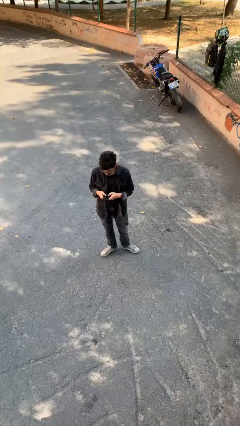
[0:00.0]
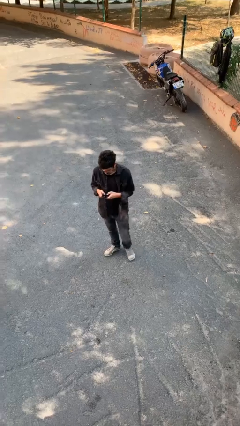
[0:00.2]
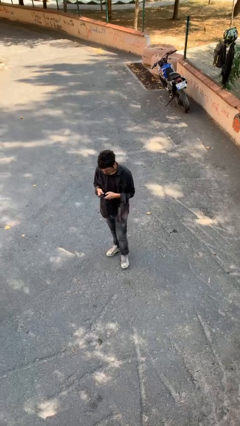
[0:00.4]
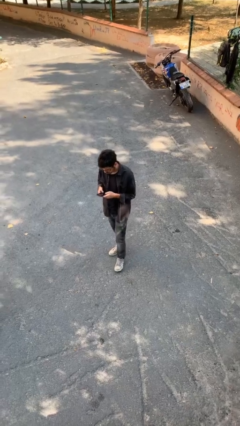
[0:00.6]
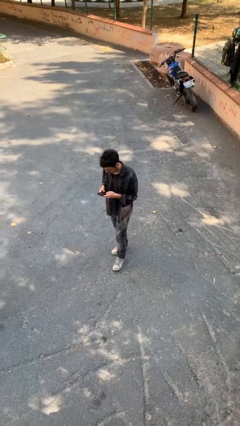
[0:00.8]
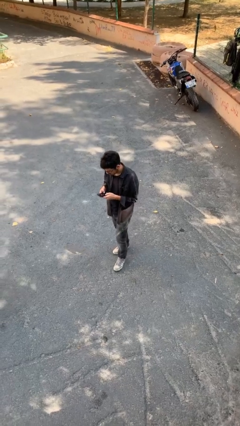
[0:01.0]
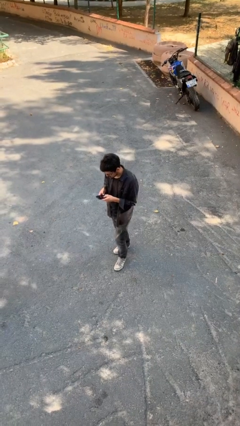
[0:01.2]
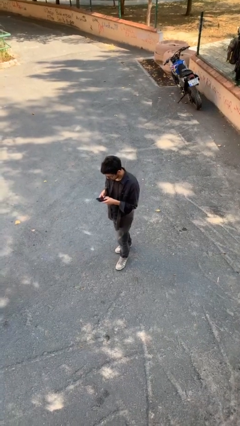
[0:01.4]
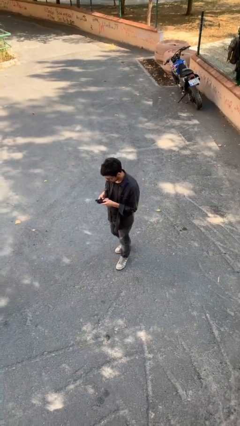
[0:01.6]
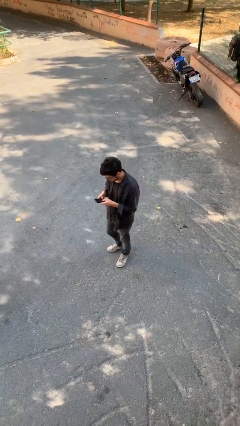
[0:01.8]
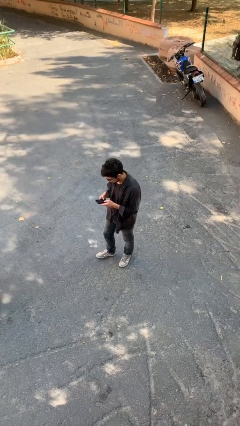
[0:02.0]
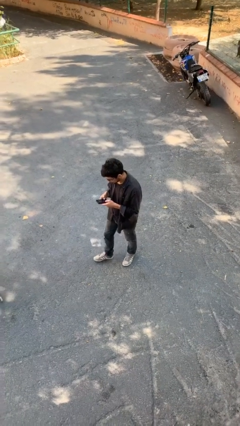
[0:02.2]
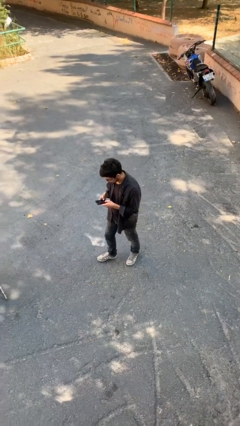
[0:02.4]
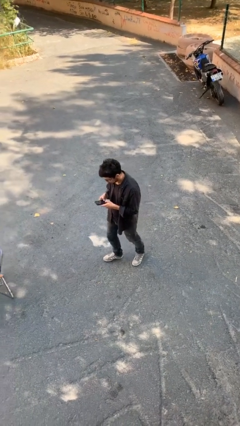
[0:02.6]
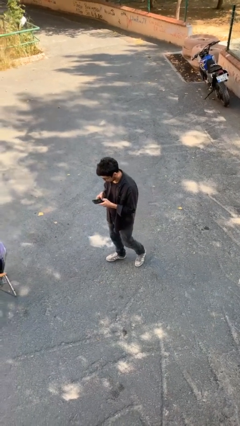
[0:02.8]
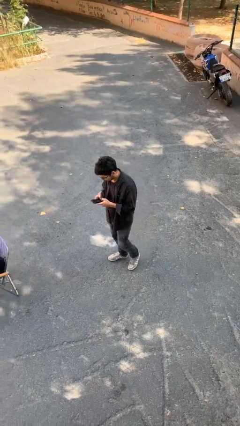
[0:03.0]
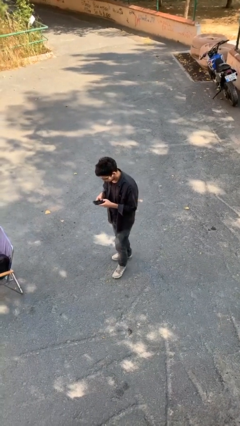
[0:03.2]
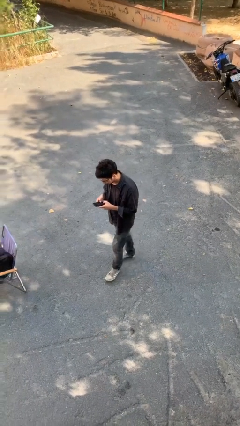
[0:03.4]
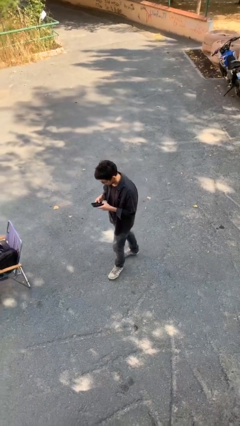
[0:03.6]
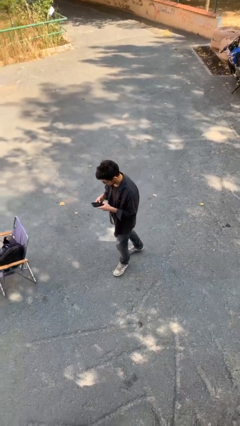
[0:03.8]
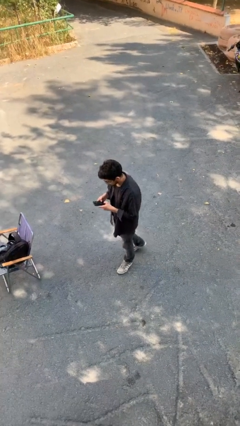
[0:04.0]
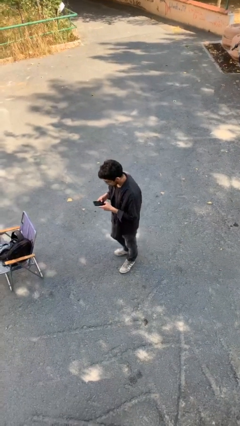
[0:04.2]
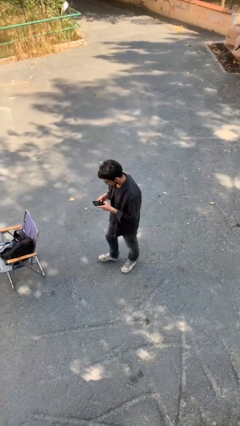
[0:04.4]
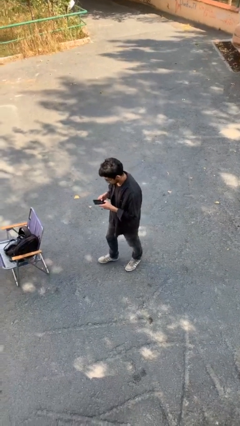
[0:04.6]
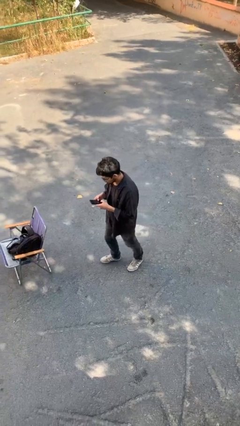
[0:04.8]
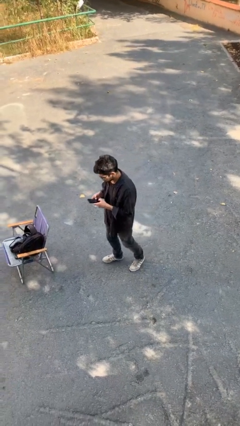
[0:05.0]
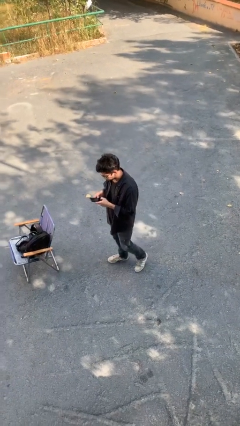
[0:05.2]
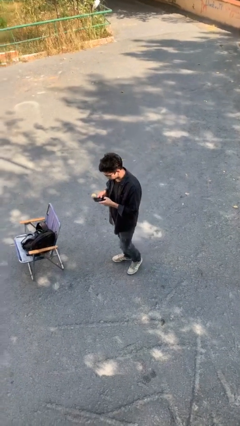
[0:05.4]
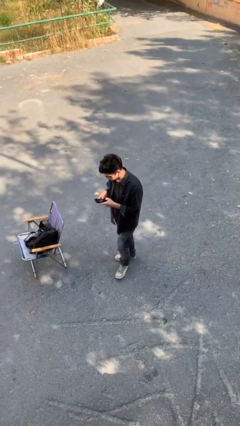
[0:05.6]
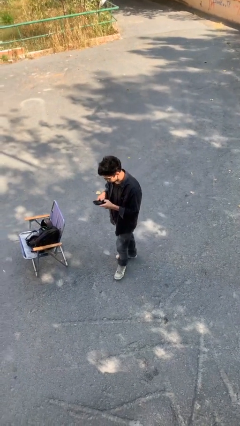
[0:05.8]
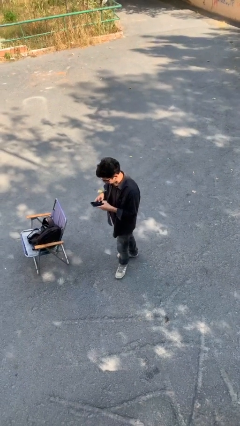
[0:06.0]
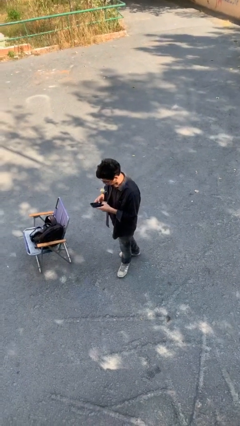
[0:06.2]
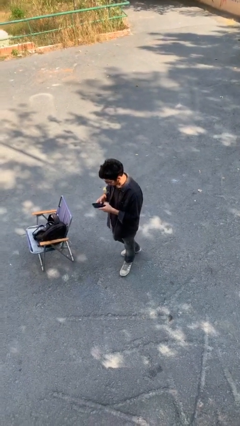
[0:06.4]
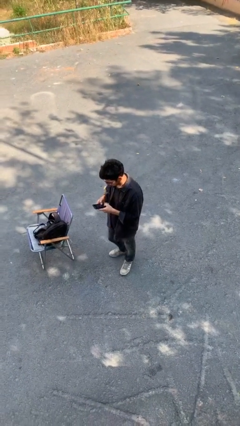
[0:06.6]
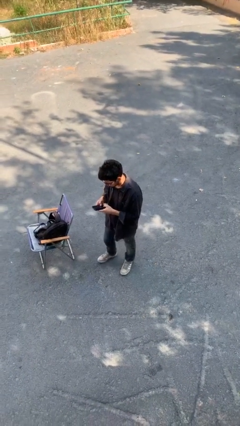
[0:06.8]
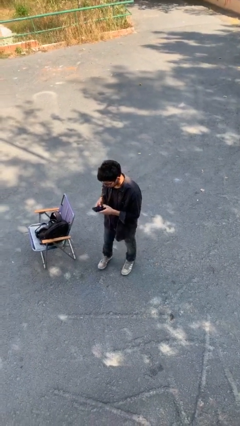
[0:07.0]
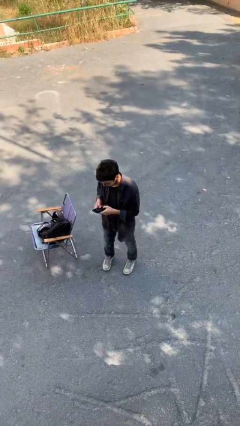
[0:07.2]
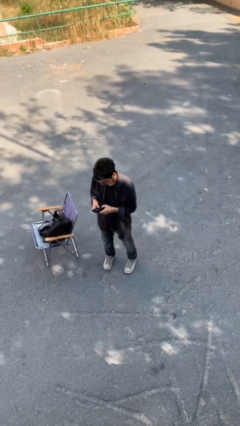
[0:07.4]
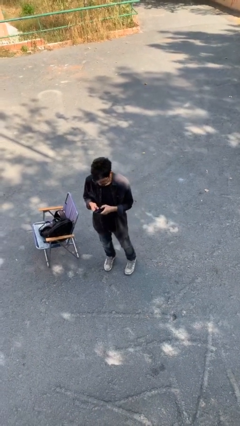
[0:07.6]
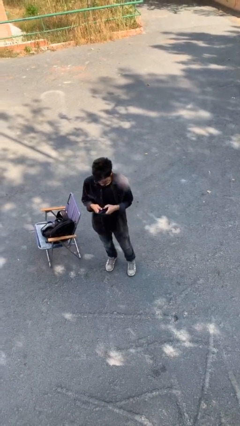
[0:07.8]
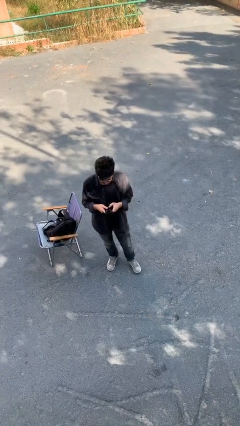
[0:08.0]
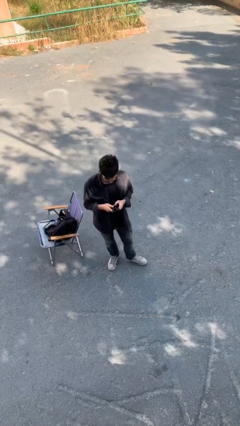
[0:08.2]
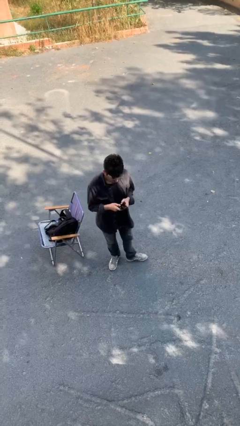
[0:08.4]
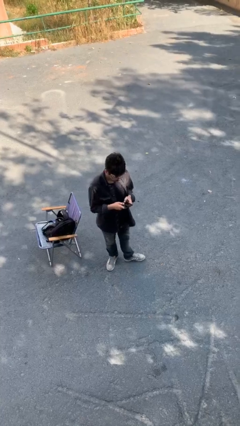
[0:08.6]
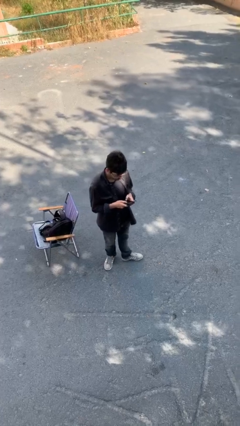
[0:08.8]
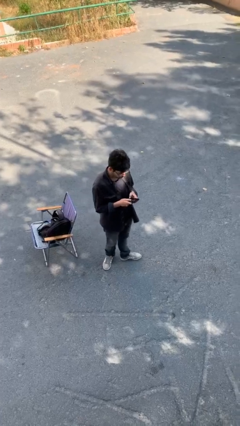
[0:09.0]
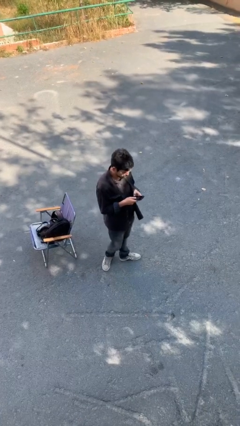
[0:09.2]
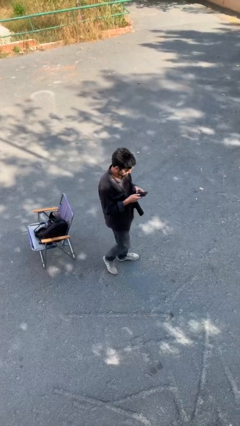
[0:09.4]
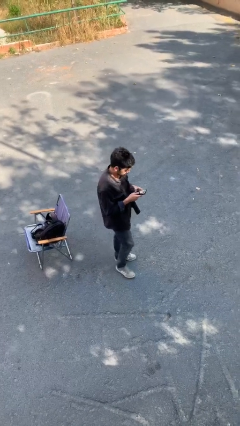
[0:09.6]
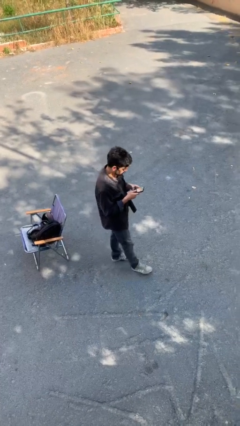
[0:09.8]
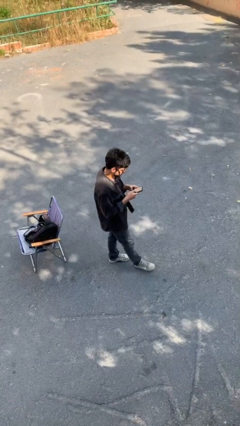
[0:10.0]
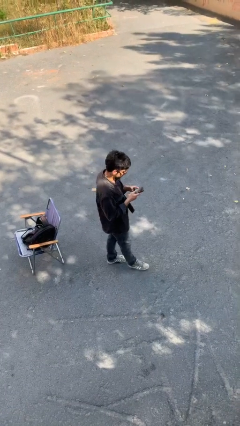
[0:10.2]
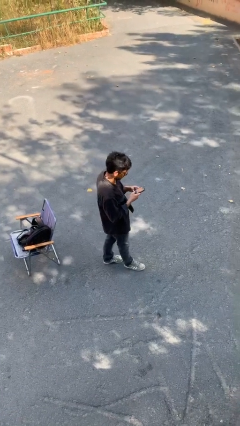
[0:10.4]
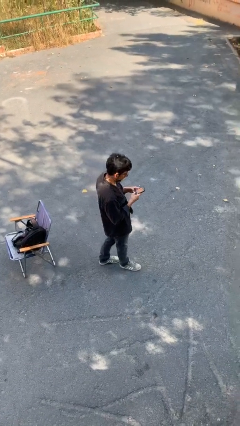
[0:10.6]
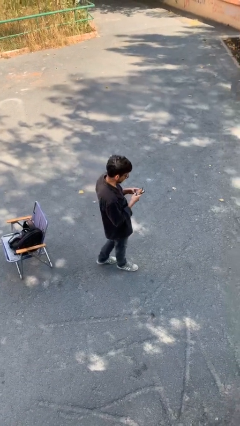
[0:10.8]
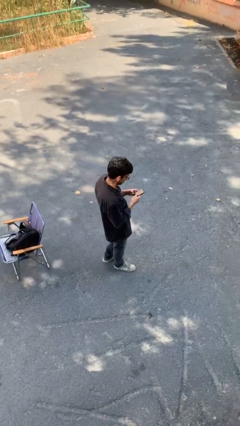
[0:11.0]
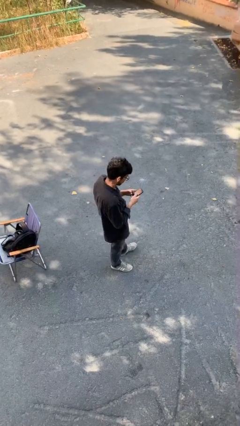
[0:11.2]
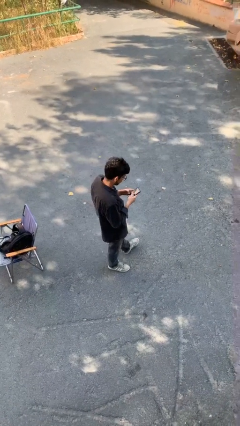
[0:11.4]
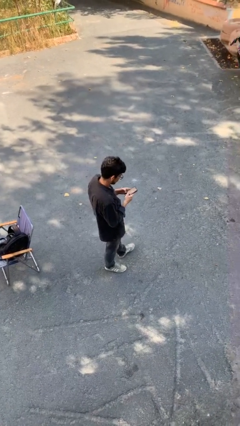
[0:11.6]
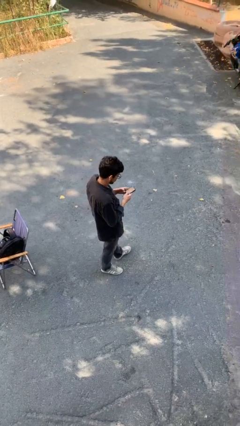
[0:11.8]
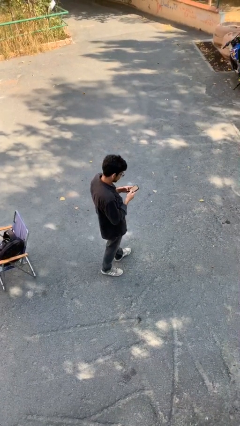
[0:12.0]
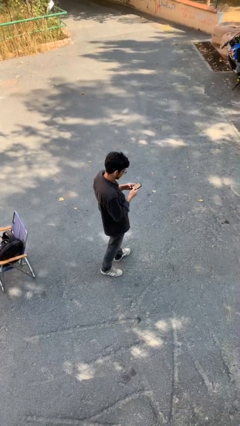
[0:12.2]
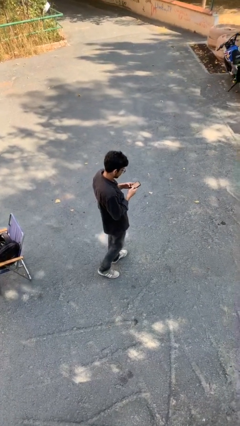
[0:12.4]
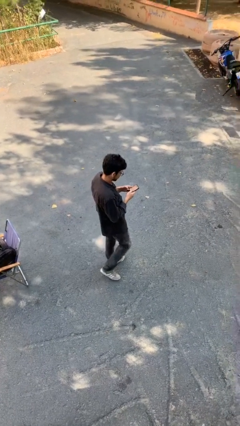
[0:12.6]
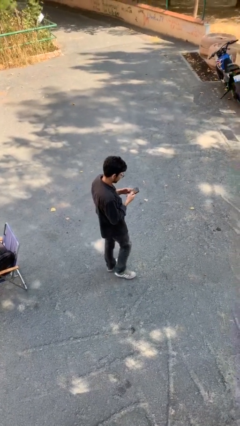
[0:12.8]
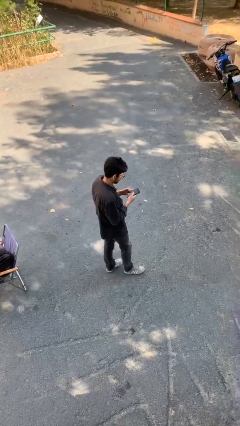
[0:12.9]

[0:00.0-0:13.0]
person texts on phone

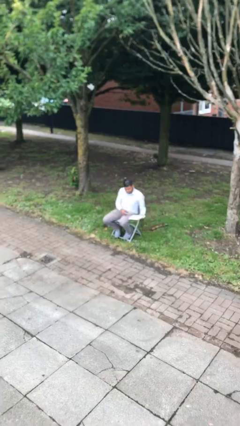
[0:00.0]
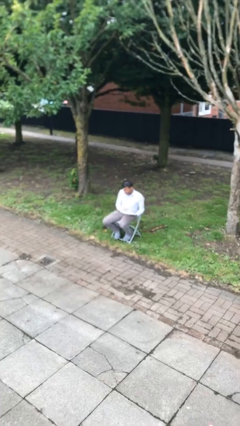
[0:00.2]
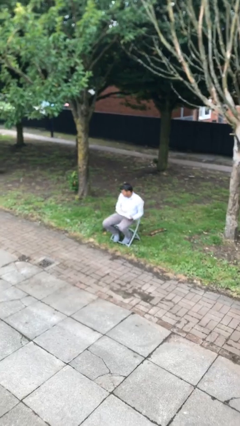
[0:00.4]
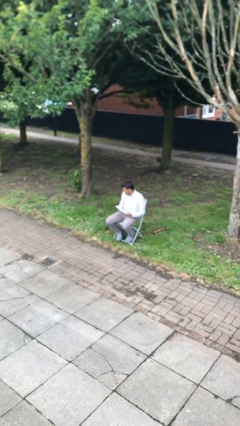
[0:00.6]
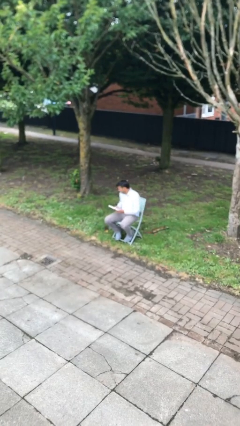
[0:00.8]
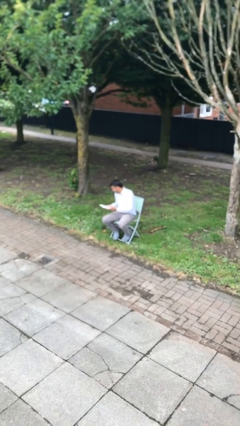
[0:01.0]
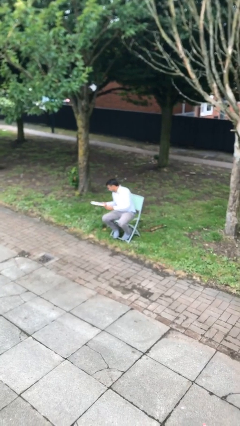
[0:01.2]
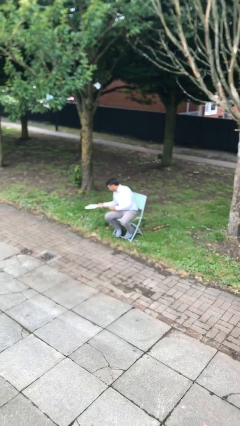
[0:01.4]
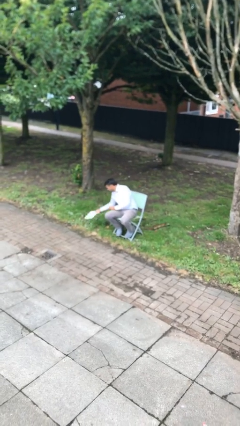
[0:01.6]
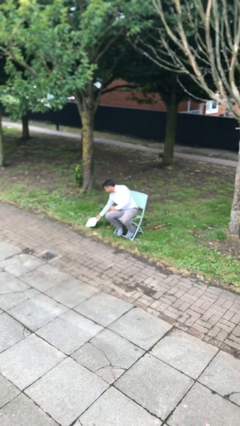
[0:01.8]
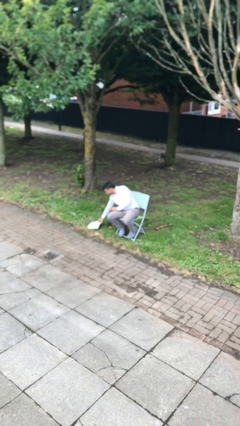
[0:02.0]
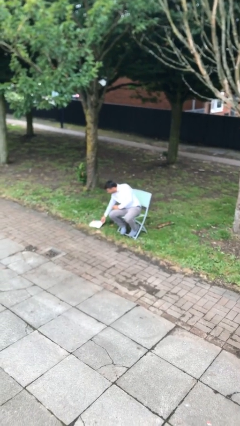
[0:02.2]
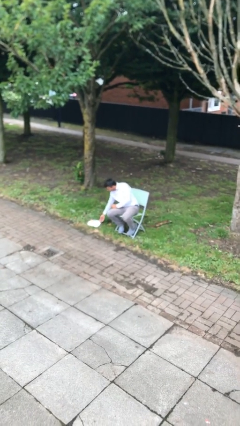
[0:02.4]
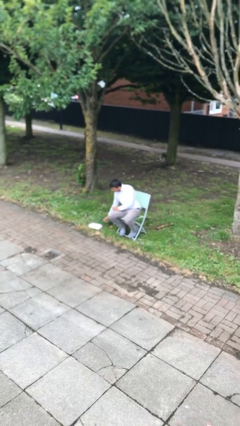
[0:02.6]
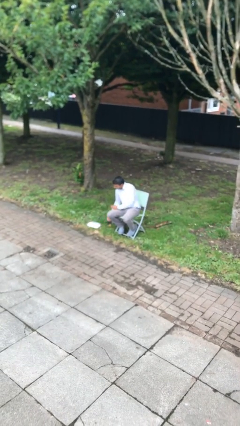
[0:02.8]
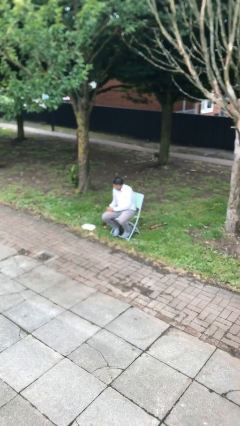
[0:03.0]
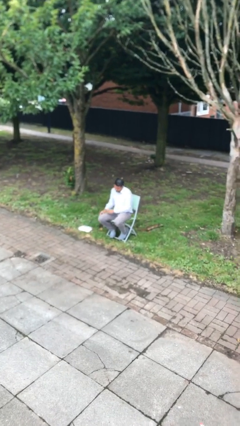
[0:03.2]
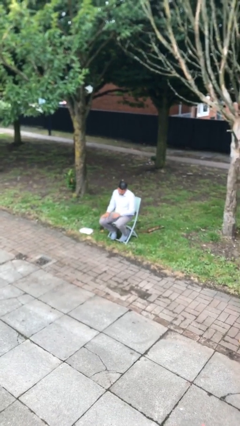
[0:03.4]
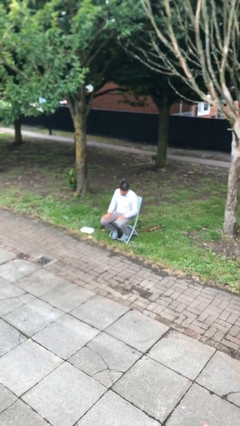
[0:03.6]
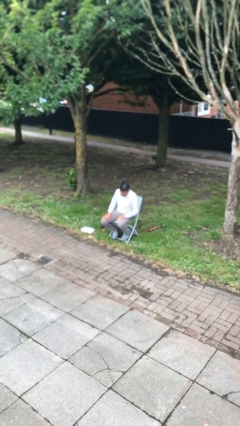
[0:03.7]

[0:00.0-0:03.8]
person puts down object on floor

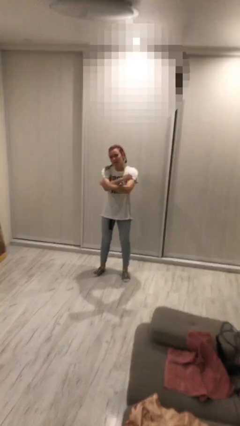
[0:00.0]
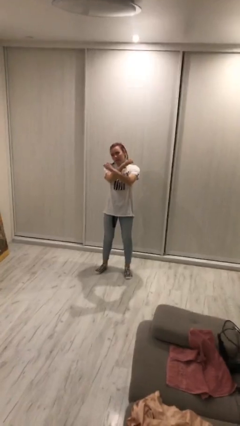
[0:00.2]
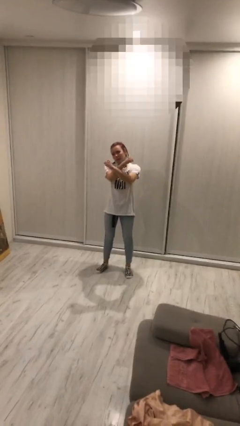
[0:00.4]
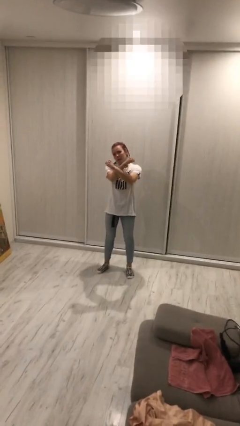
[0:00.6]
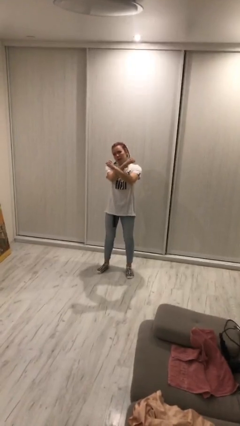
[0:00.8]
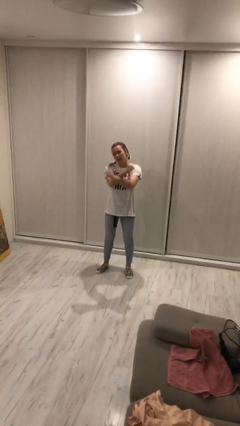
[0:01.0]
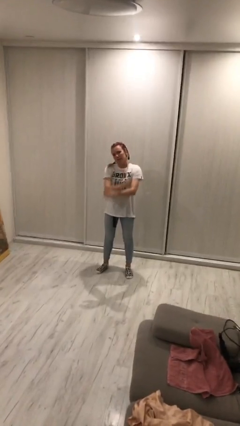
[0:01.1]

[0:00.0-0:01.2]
person gestures arms x
